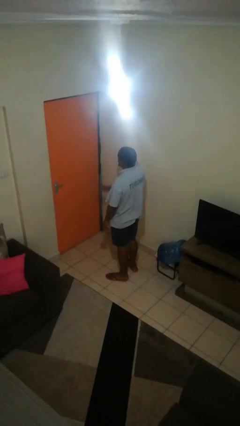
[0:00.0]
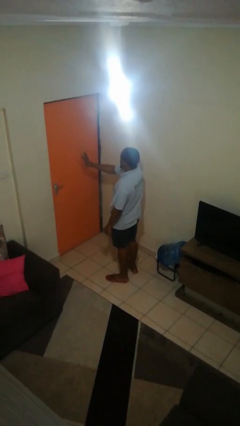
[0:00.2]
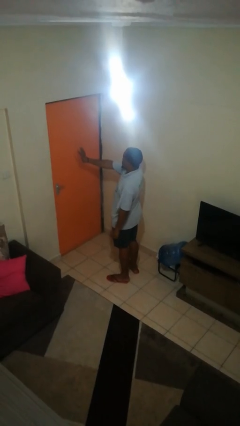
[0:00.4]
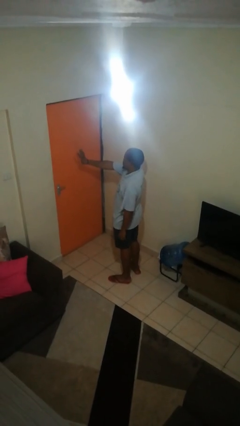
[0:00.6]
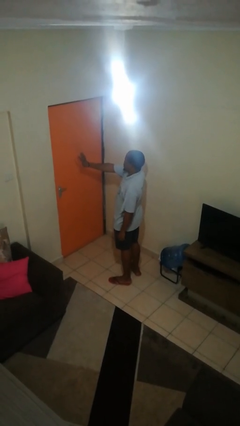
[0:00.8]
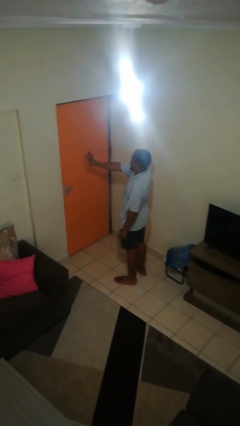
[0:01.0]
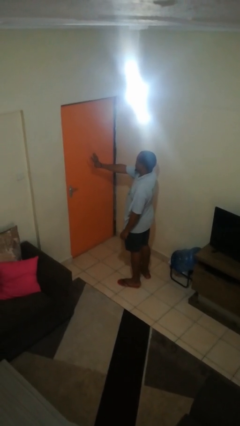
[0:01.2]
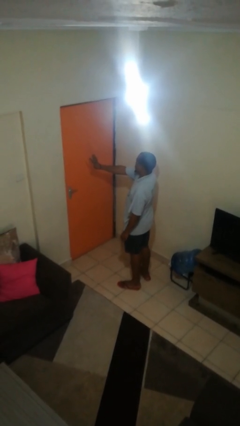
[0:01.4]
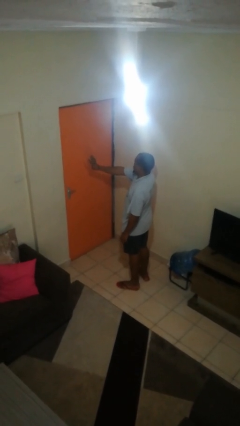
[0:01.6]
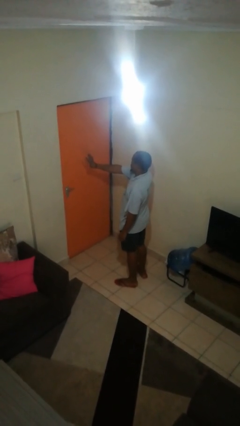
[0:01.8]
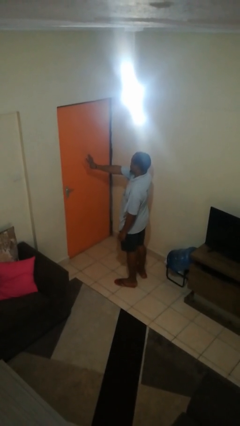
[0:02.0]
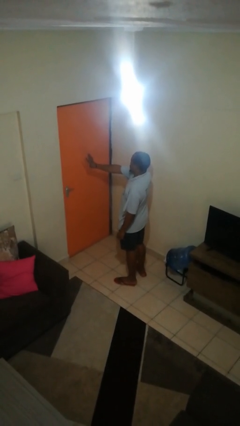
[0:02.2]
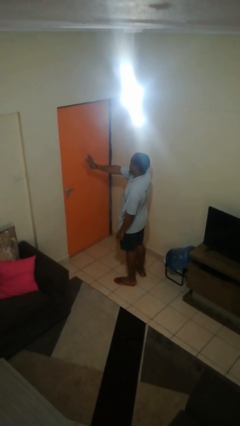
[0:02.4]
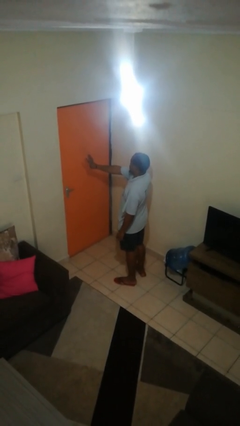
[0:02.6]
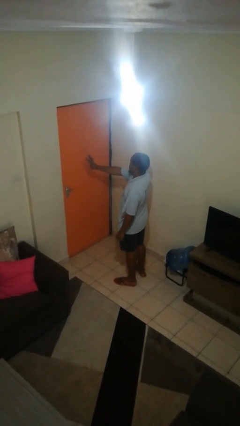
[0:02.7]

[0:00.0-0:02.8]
person gestures number four

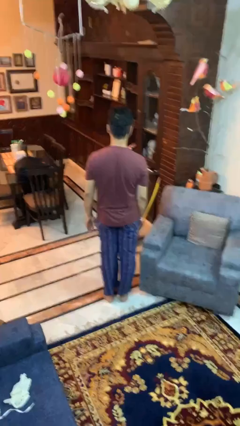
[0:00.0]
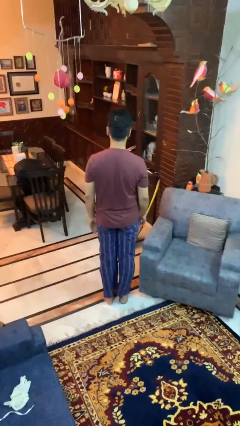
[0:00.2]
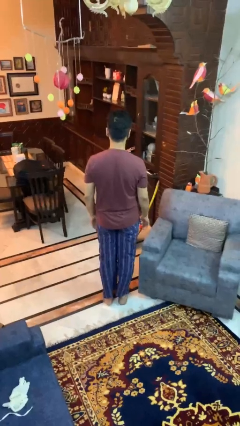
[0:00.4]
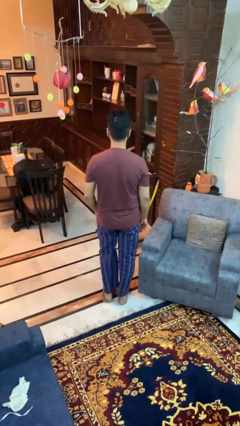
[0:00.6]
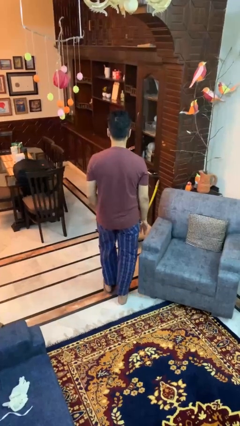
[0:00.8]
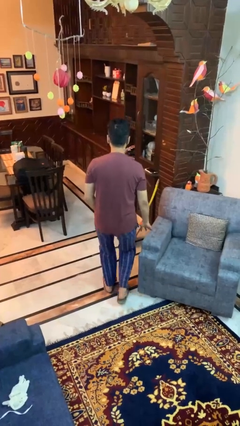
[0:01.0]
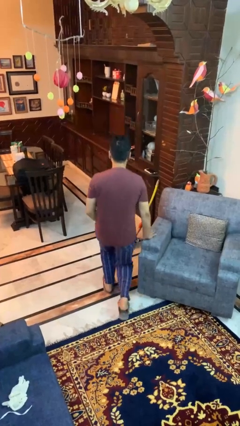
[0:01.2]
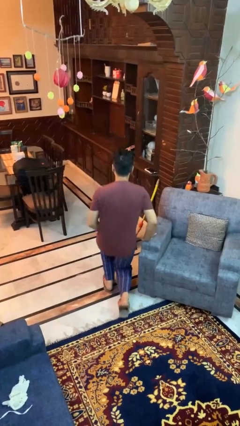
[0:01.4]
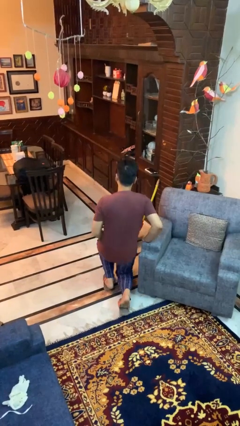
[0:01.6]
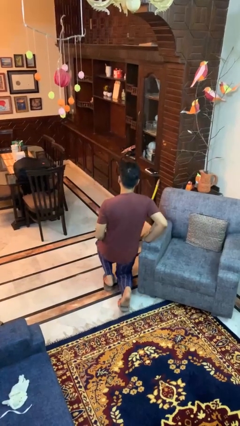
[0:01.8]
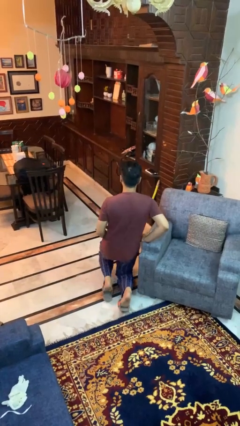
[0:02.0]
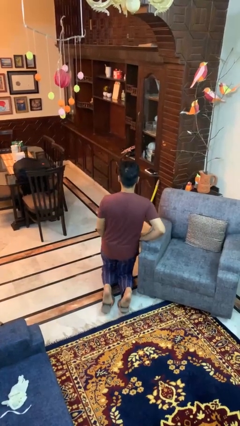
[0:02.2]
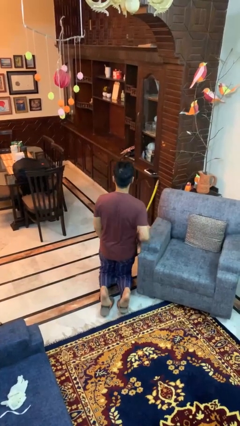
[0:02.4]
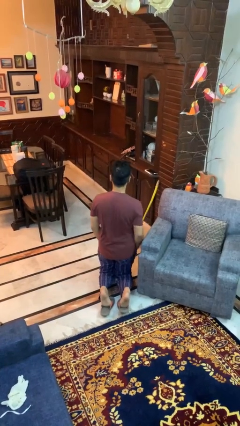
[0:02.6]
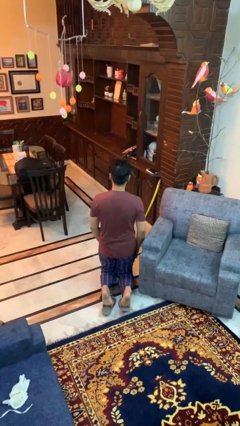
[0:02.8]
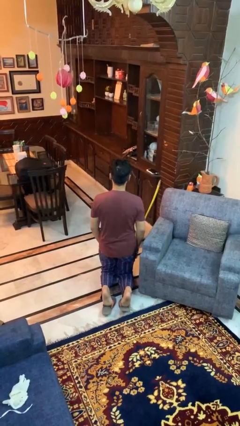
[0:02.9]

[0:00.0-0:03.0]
person kneels

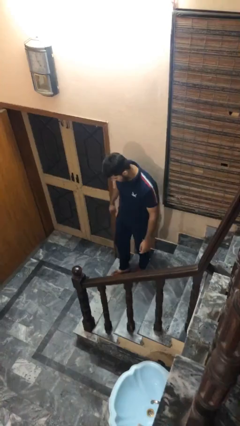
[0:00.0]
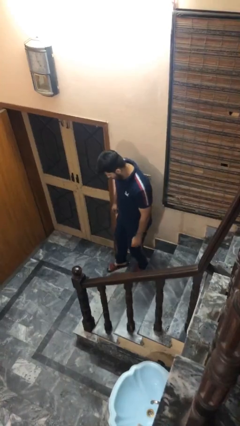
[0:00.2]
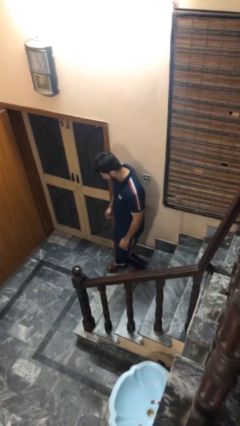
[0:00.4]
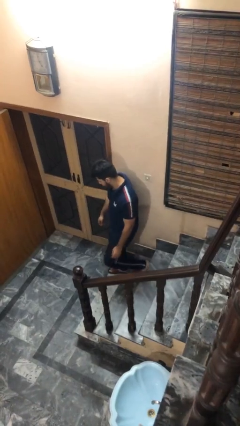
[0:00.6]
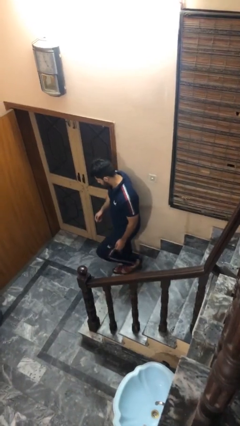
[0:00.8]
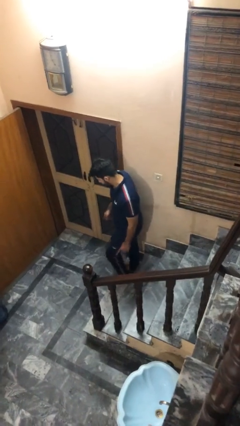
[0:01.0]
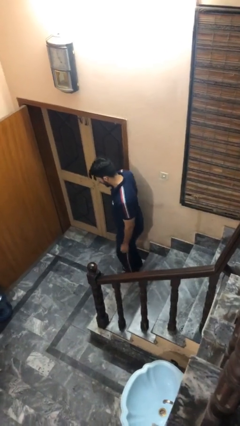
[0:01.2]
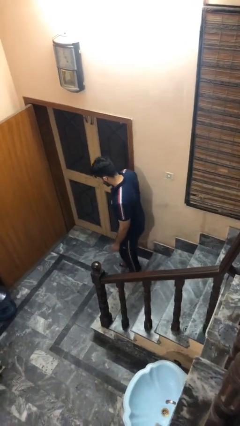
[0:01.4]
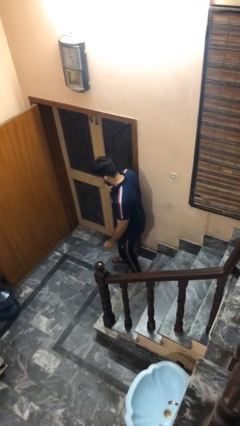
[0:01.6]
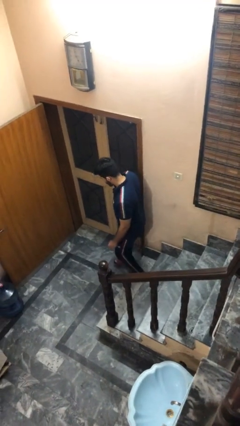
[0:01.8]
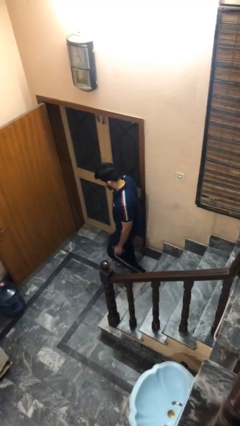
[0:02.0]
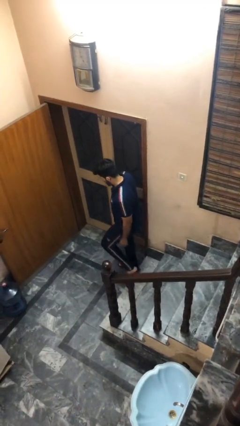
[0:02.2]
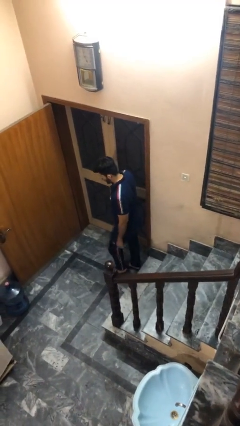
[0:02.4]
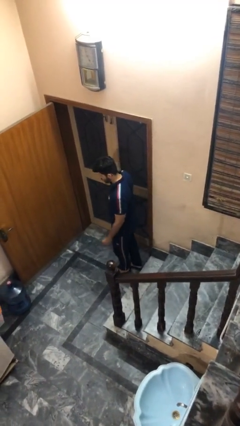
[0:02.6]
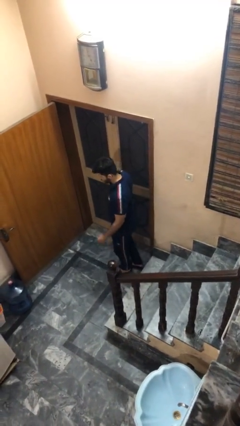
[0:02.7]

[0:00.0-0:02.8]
person climbs down stairs

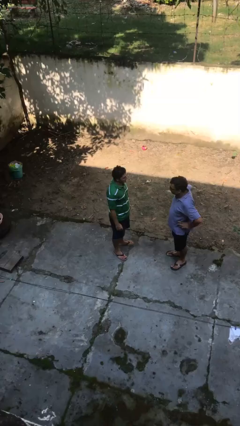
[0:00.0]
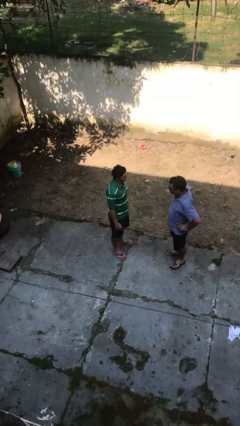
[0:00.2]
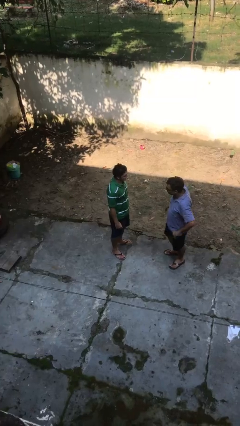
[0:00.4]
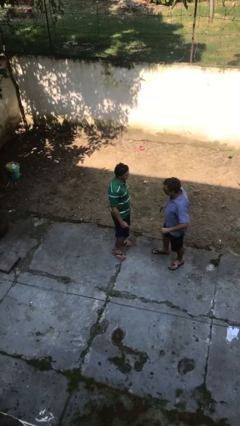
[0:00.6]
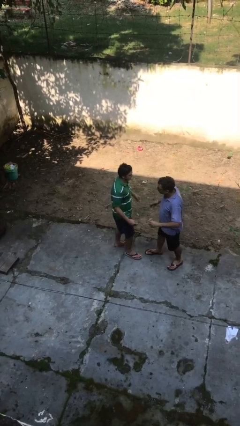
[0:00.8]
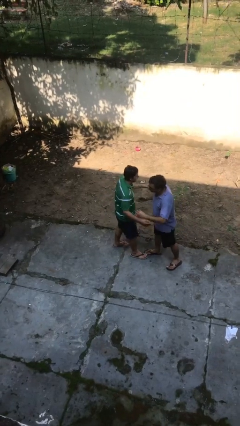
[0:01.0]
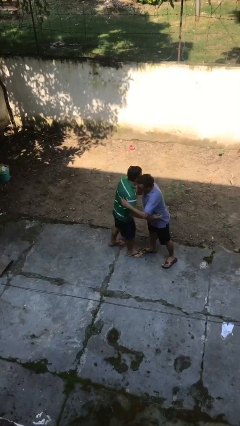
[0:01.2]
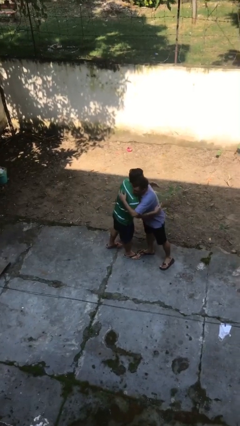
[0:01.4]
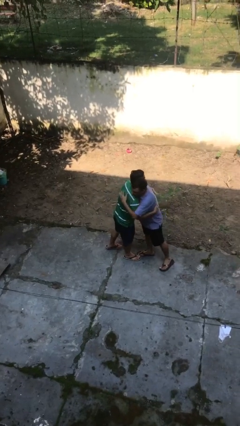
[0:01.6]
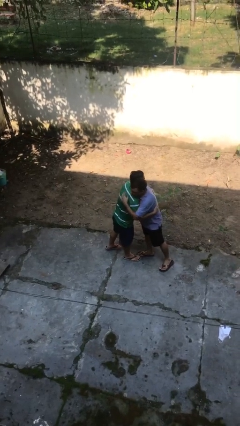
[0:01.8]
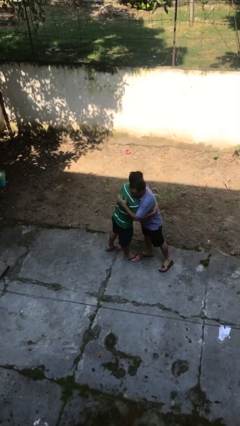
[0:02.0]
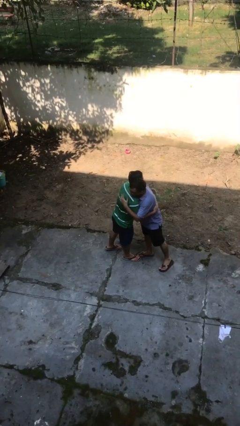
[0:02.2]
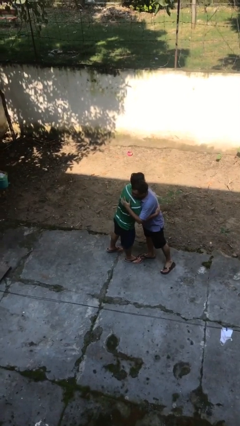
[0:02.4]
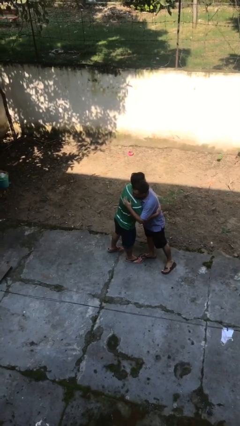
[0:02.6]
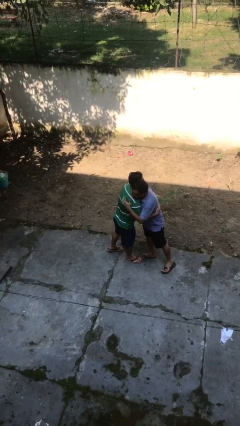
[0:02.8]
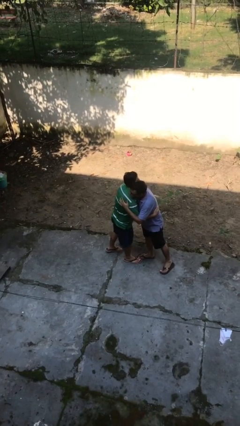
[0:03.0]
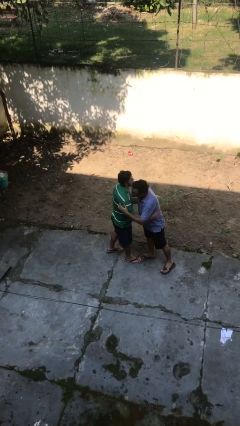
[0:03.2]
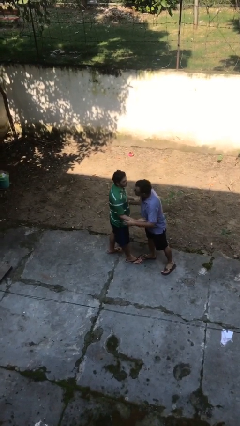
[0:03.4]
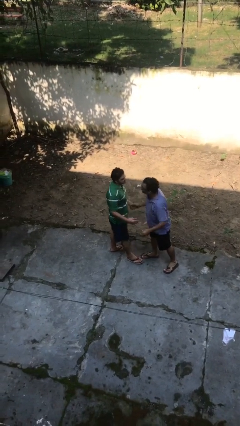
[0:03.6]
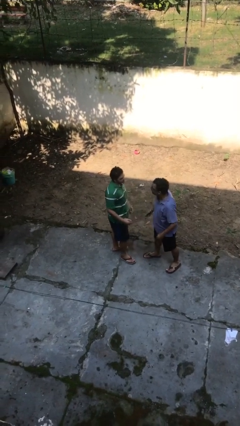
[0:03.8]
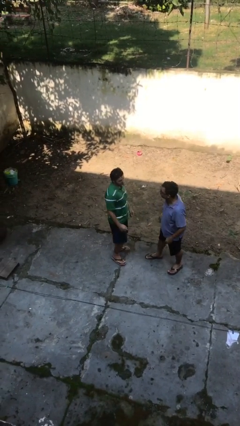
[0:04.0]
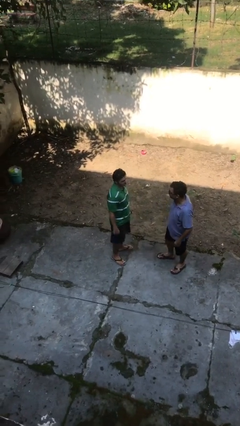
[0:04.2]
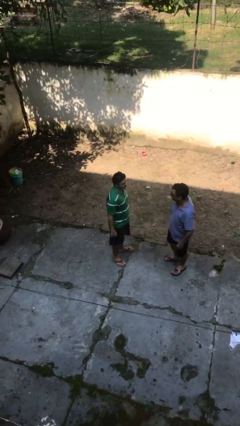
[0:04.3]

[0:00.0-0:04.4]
person embraces person

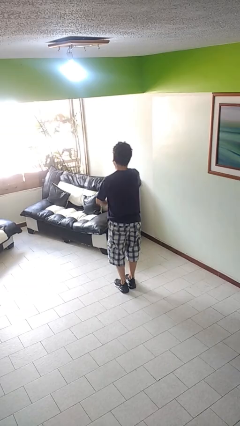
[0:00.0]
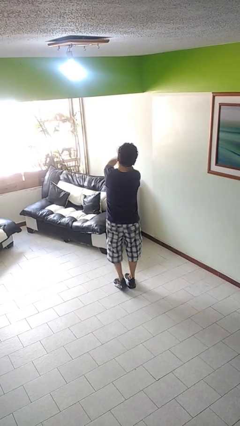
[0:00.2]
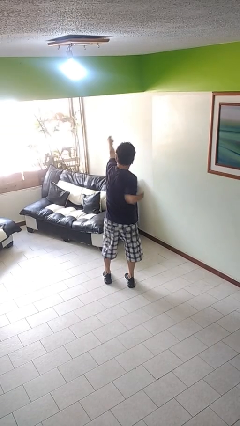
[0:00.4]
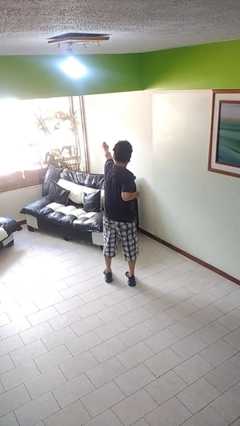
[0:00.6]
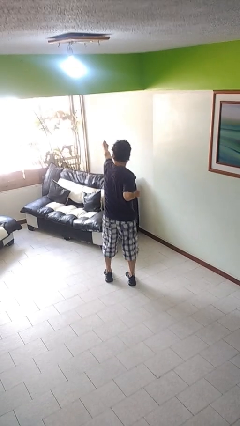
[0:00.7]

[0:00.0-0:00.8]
person karate chop

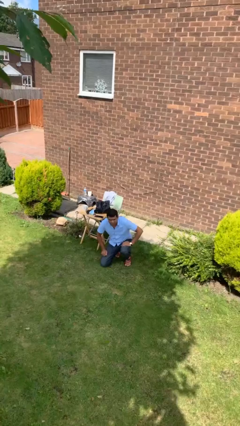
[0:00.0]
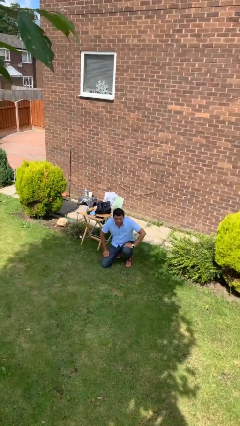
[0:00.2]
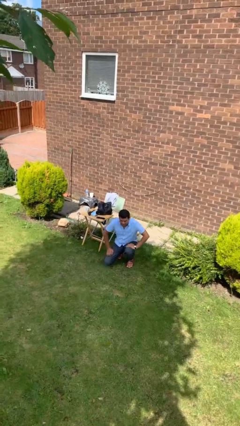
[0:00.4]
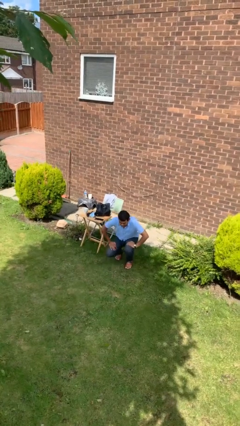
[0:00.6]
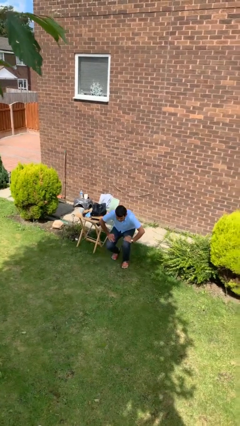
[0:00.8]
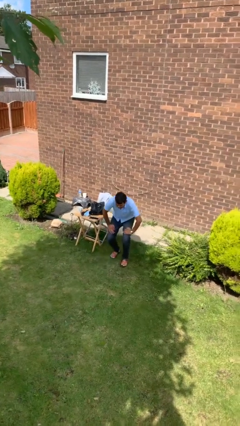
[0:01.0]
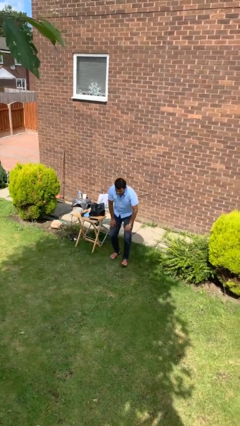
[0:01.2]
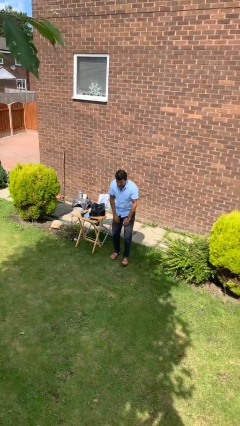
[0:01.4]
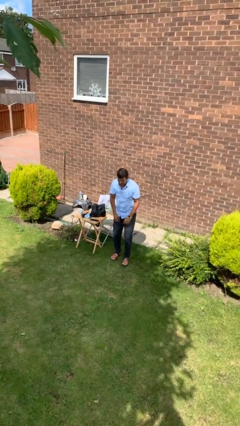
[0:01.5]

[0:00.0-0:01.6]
person stands up from floor

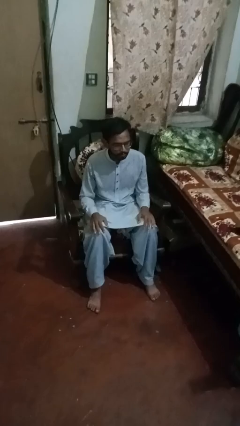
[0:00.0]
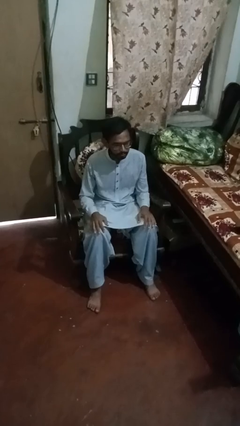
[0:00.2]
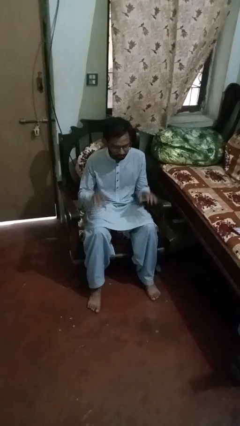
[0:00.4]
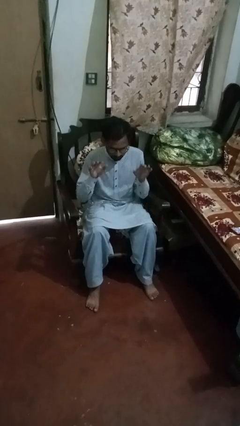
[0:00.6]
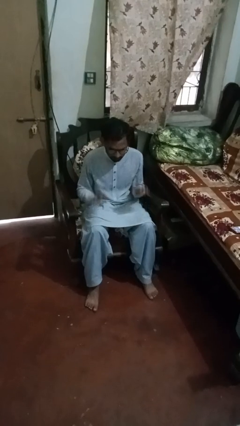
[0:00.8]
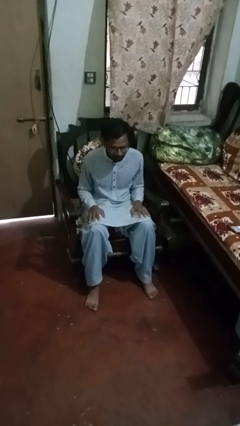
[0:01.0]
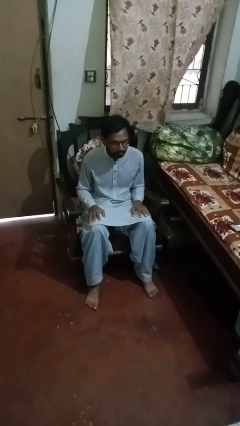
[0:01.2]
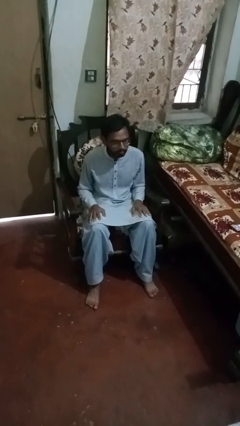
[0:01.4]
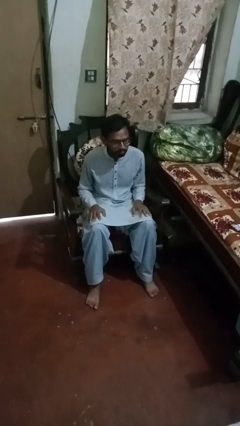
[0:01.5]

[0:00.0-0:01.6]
person slaps hands on thighs
